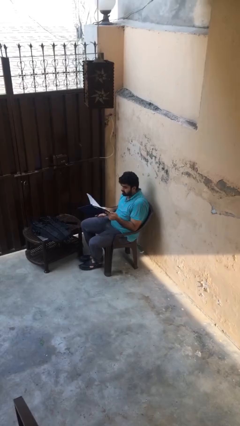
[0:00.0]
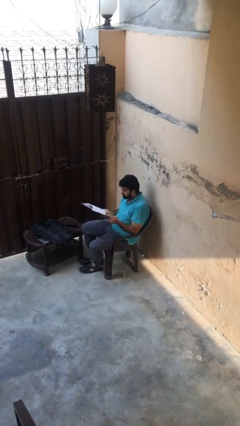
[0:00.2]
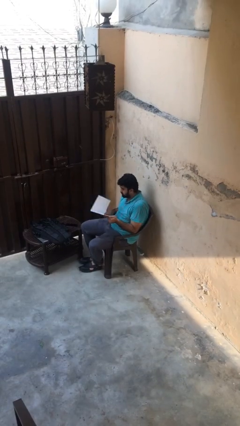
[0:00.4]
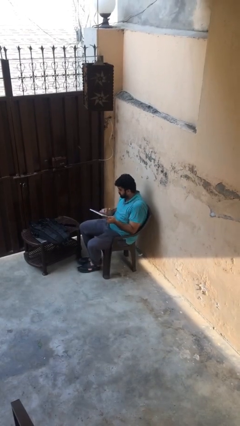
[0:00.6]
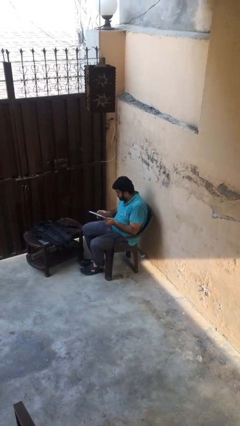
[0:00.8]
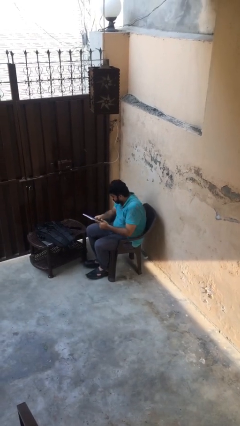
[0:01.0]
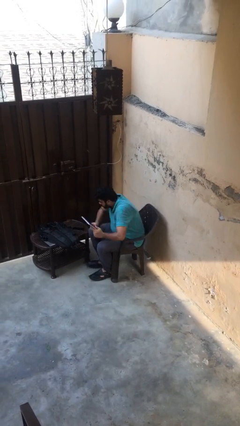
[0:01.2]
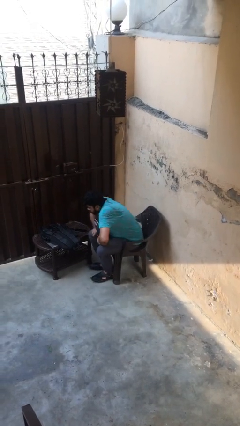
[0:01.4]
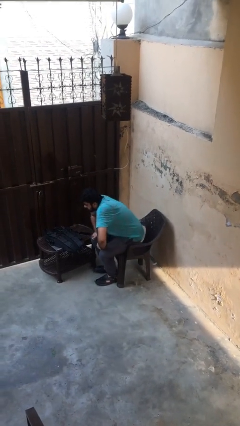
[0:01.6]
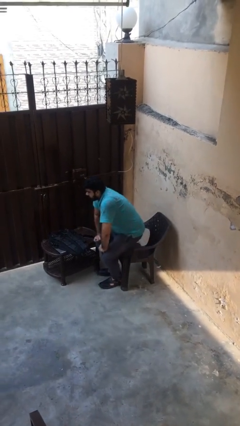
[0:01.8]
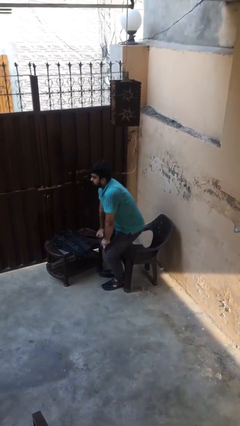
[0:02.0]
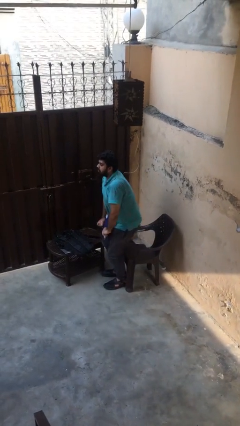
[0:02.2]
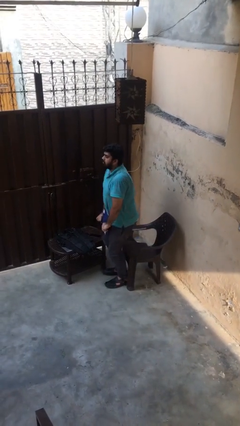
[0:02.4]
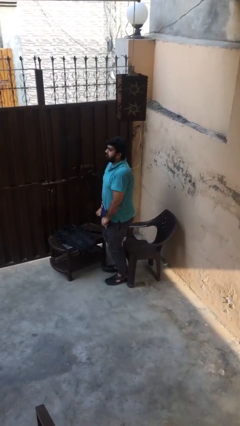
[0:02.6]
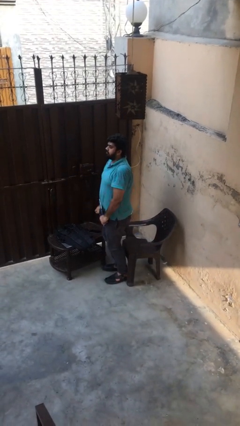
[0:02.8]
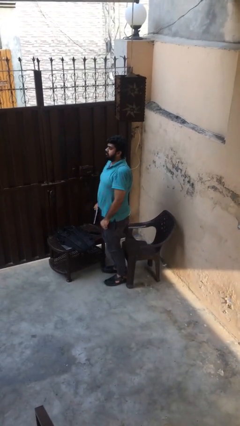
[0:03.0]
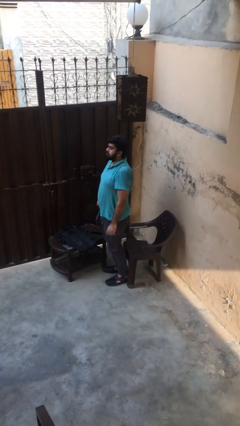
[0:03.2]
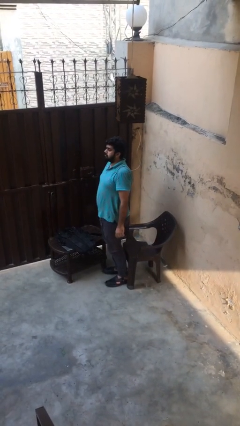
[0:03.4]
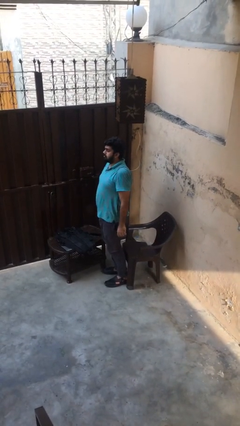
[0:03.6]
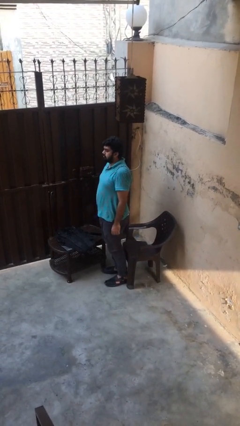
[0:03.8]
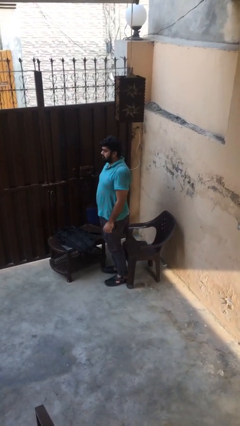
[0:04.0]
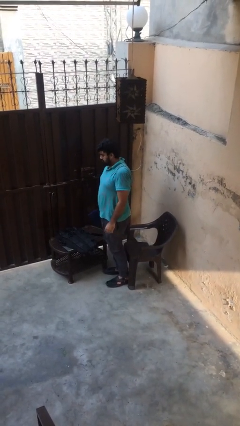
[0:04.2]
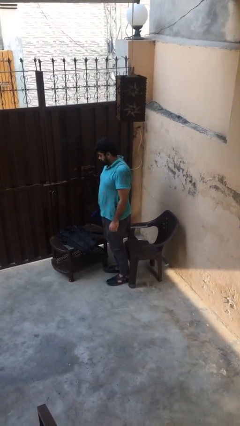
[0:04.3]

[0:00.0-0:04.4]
person stands up

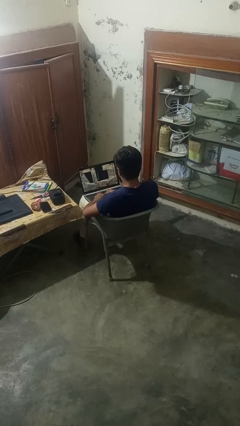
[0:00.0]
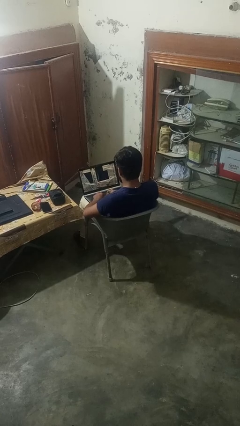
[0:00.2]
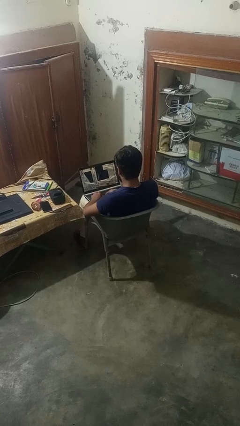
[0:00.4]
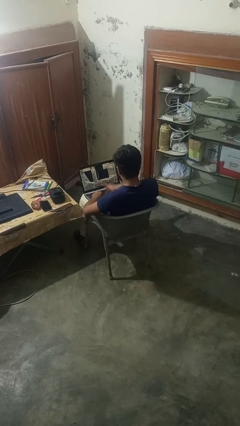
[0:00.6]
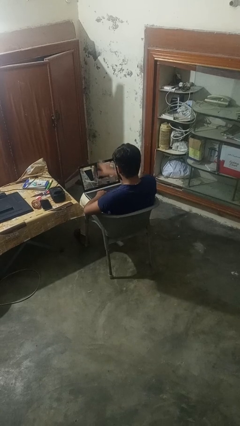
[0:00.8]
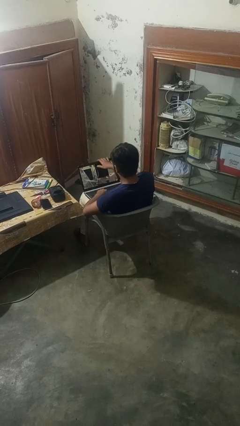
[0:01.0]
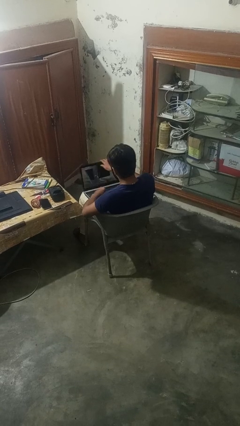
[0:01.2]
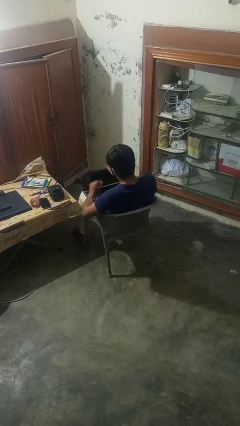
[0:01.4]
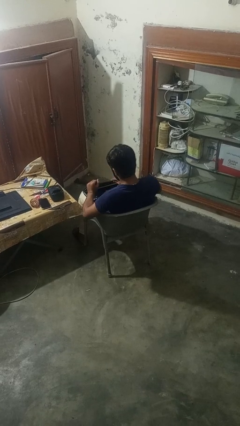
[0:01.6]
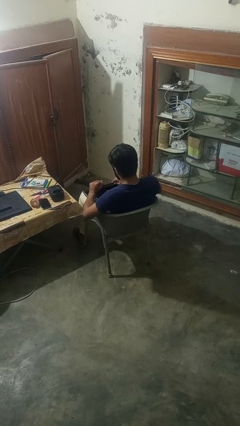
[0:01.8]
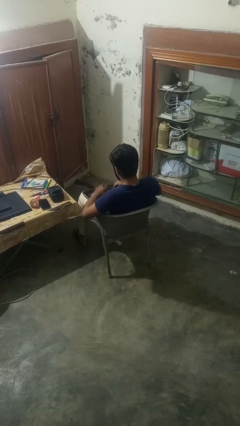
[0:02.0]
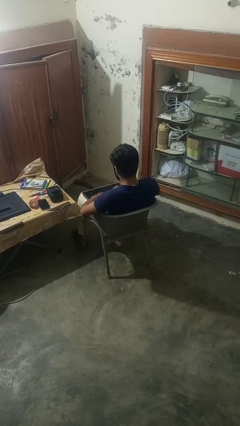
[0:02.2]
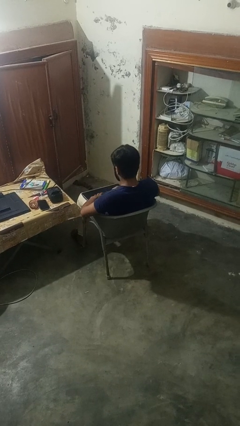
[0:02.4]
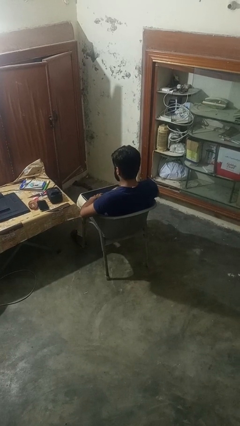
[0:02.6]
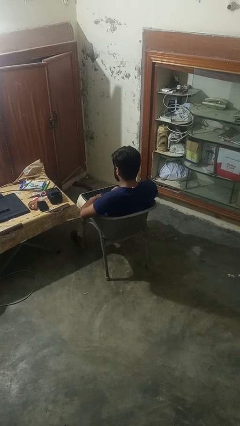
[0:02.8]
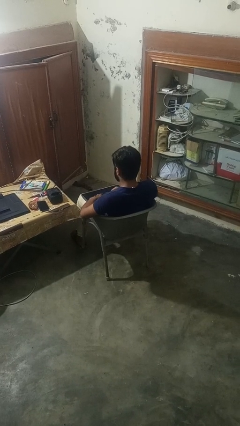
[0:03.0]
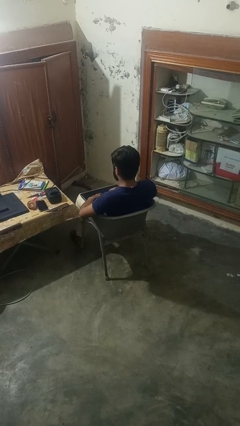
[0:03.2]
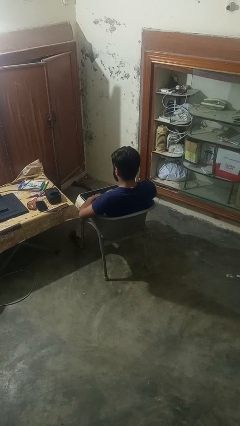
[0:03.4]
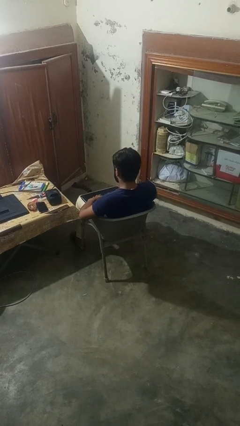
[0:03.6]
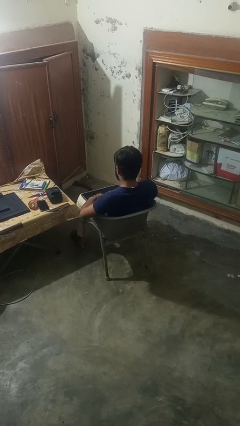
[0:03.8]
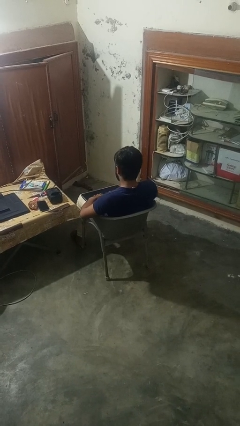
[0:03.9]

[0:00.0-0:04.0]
person closes laptop

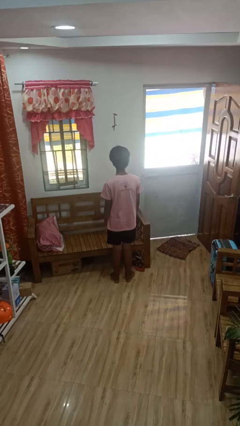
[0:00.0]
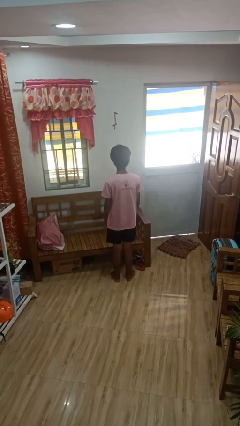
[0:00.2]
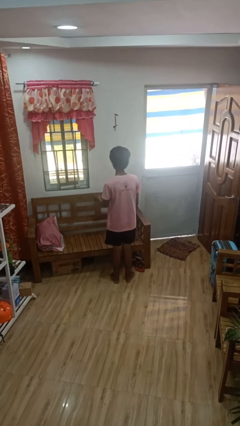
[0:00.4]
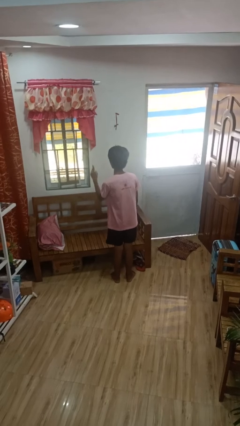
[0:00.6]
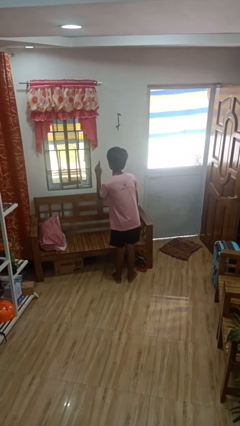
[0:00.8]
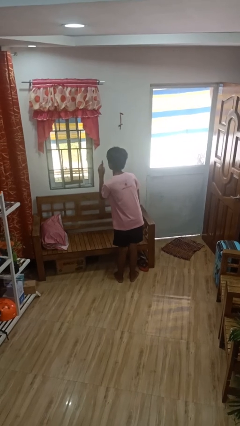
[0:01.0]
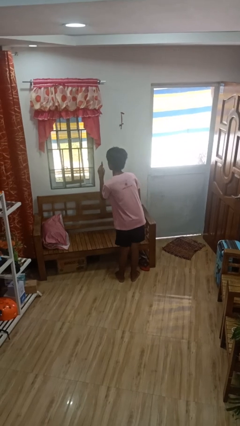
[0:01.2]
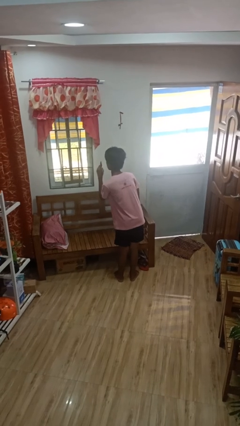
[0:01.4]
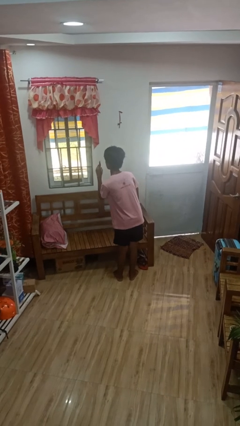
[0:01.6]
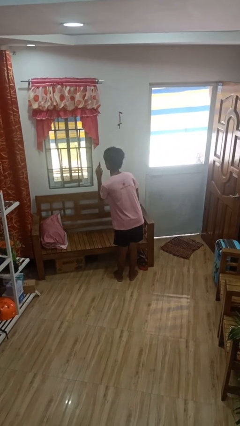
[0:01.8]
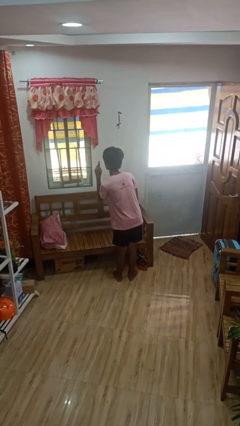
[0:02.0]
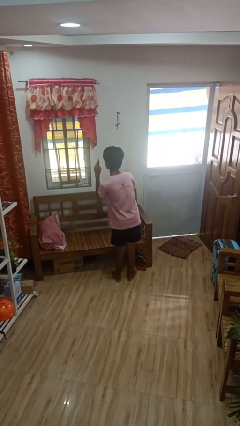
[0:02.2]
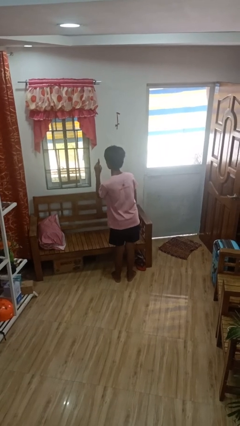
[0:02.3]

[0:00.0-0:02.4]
person gestures be quiet

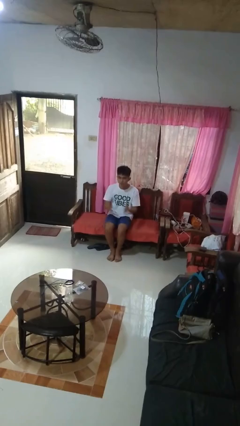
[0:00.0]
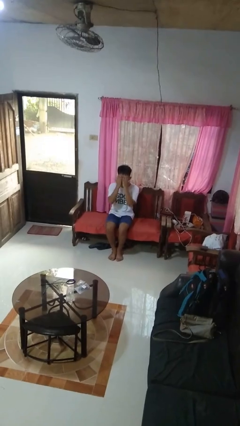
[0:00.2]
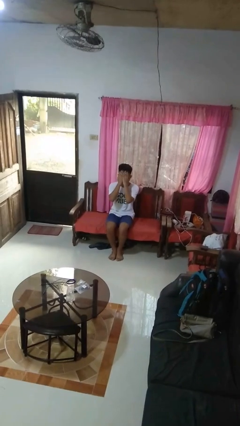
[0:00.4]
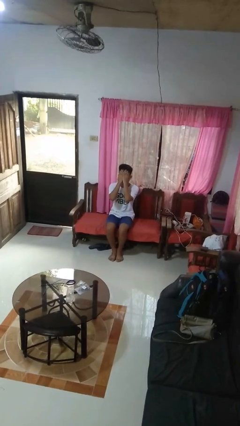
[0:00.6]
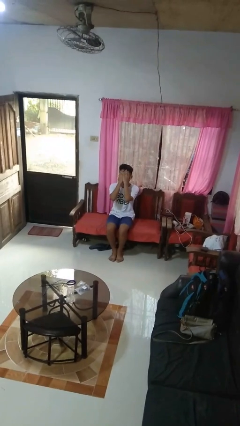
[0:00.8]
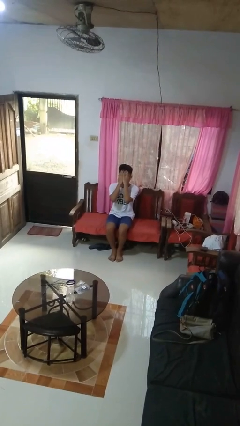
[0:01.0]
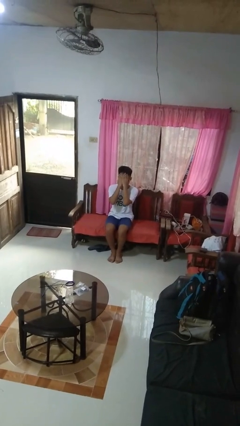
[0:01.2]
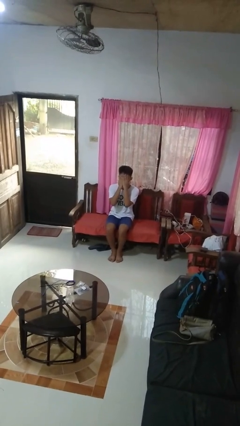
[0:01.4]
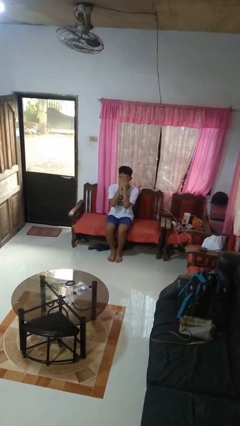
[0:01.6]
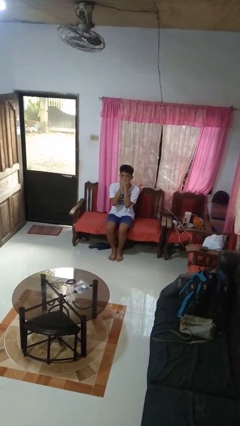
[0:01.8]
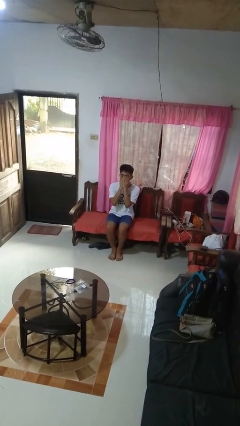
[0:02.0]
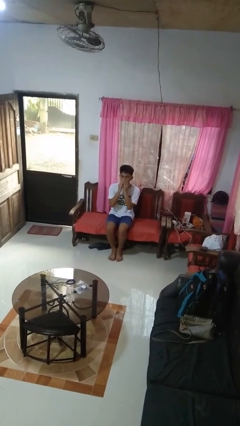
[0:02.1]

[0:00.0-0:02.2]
person covers face with hands

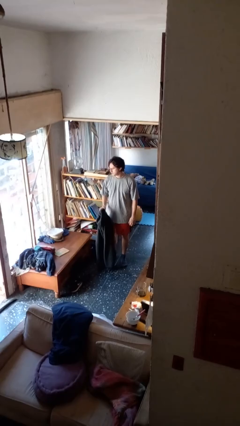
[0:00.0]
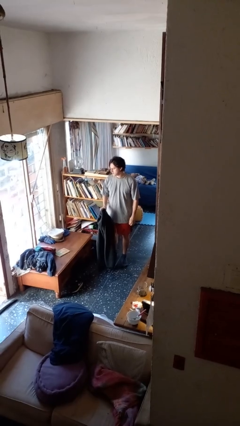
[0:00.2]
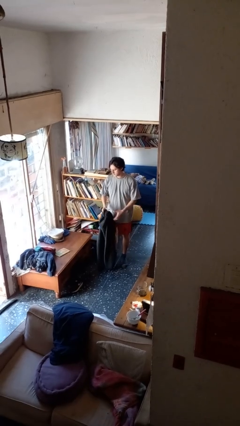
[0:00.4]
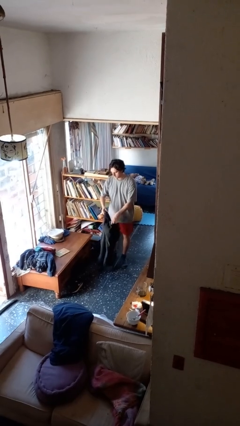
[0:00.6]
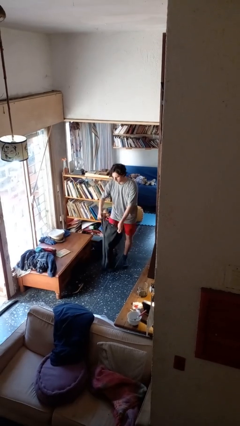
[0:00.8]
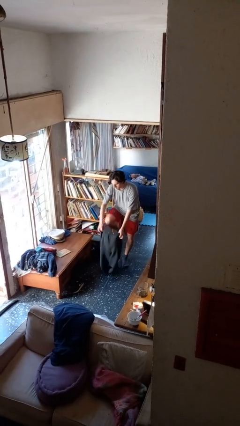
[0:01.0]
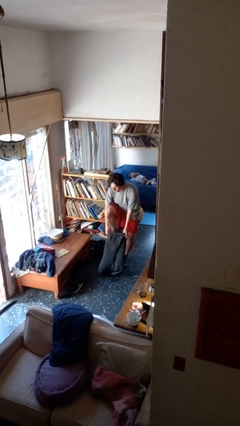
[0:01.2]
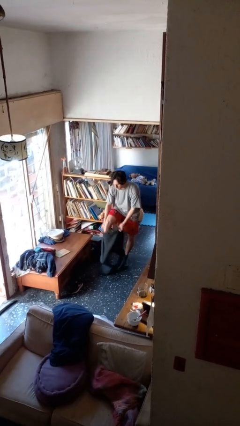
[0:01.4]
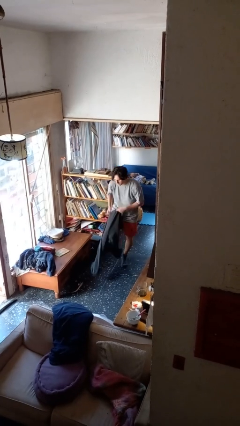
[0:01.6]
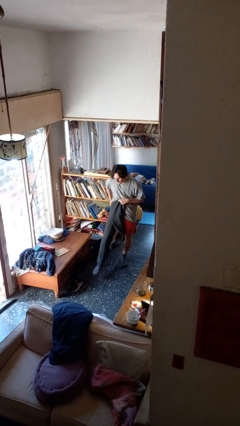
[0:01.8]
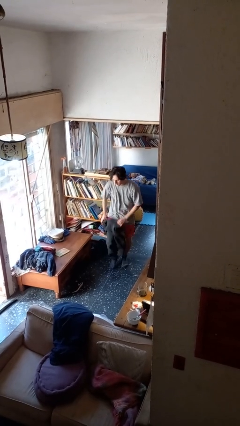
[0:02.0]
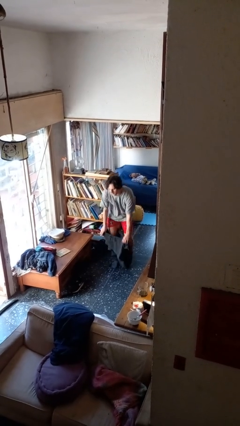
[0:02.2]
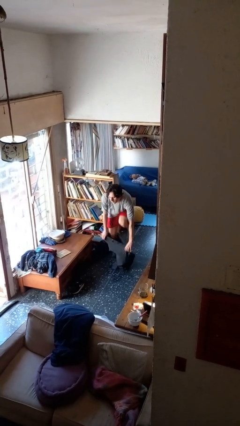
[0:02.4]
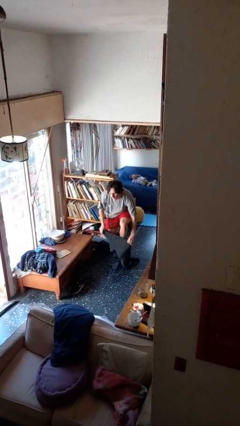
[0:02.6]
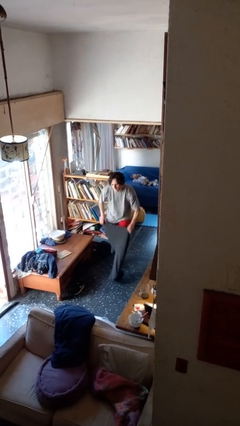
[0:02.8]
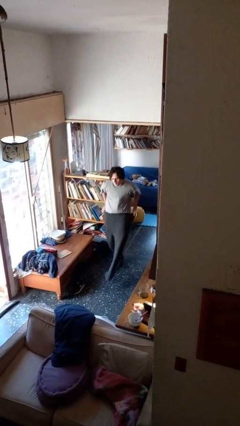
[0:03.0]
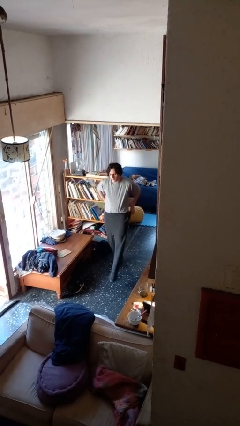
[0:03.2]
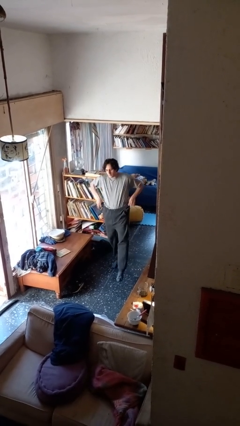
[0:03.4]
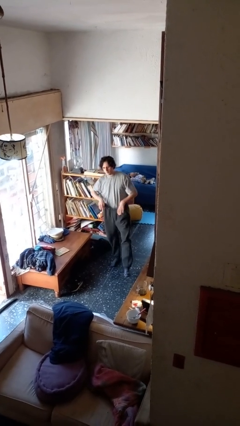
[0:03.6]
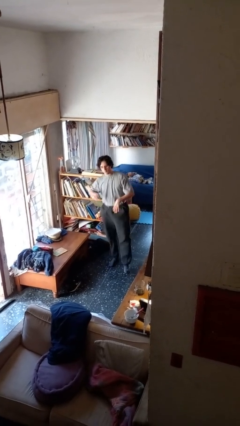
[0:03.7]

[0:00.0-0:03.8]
person takes off pants

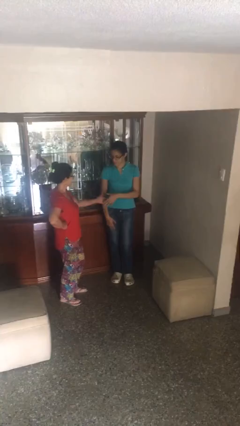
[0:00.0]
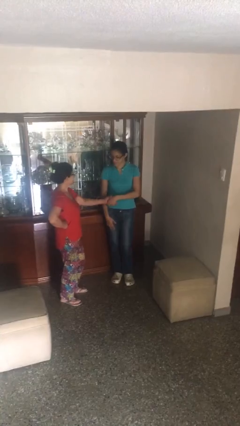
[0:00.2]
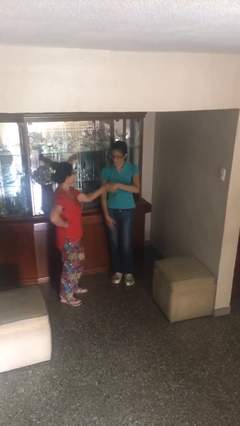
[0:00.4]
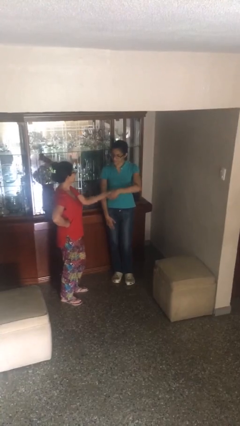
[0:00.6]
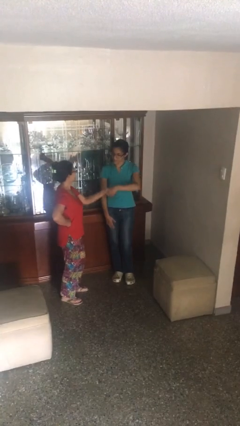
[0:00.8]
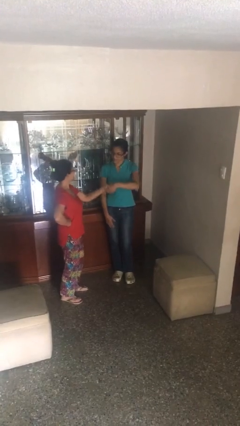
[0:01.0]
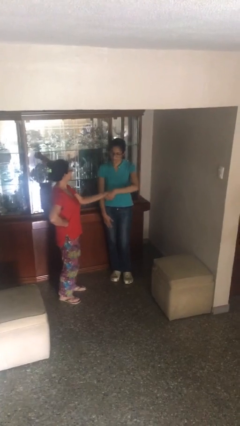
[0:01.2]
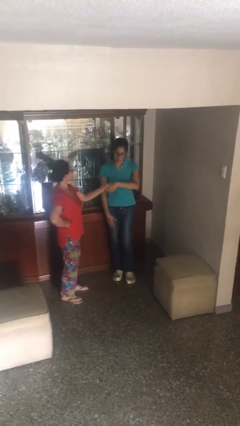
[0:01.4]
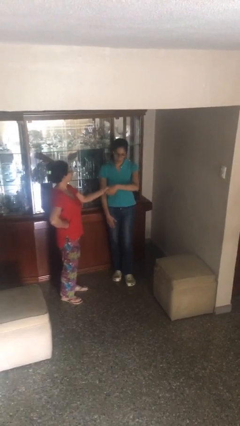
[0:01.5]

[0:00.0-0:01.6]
person shakes hand
